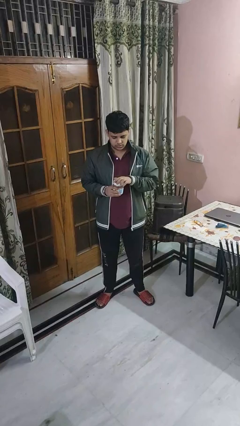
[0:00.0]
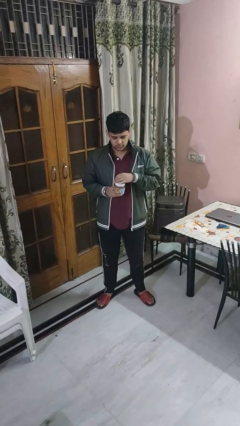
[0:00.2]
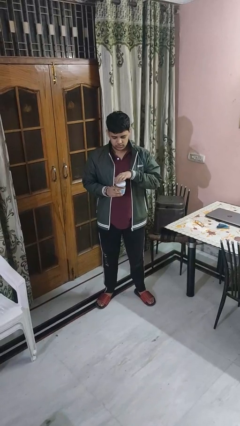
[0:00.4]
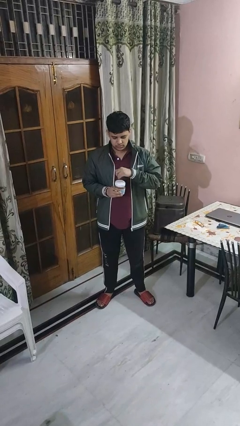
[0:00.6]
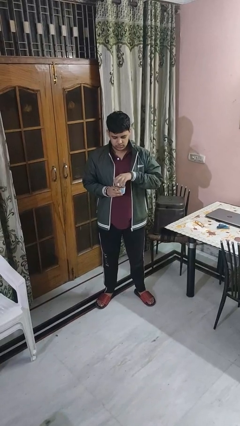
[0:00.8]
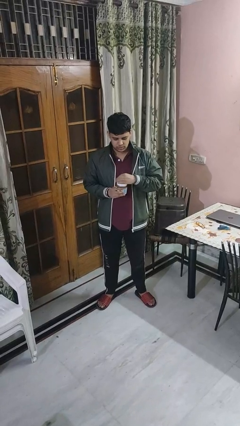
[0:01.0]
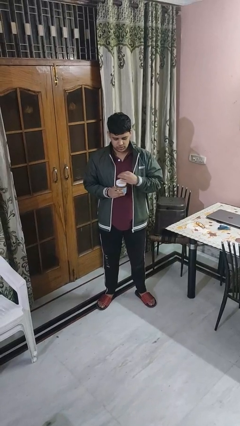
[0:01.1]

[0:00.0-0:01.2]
person closes jar

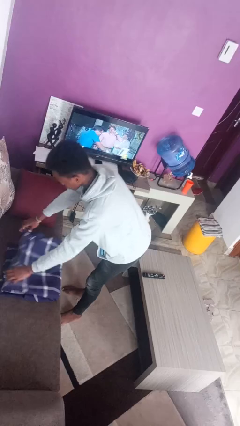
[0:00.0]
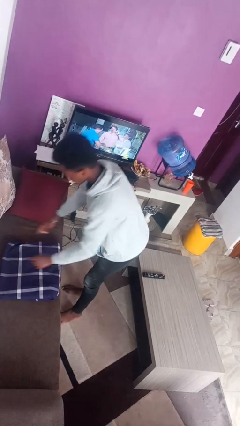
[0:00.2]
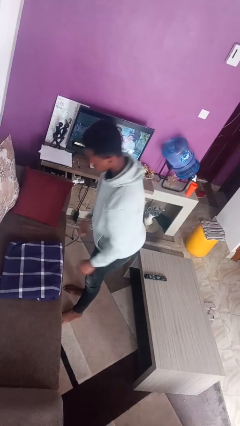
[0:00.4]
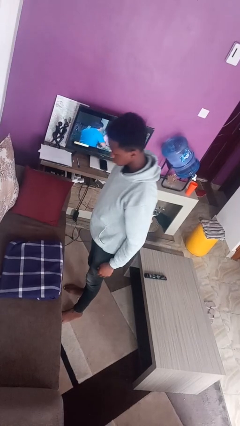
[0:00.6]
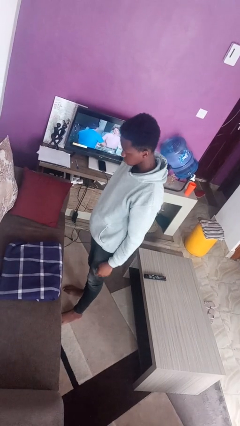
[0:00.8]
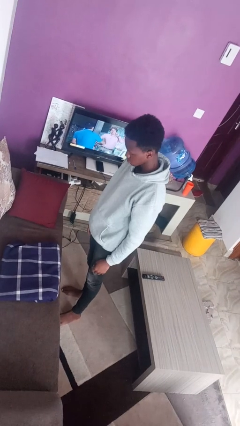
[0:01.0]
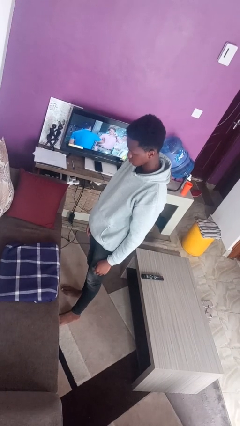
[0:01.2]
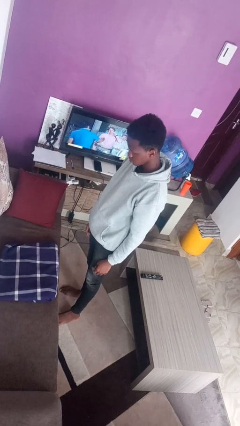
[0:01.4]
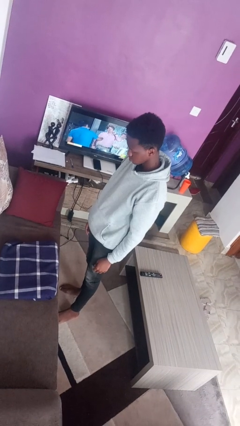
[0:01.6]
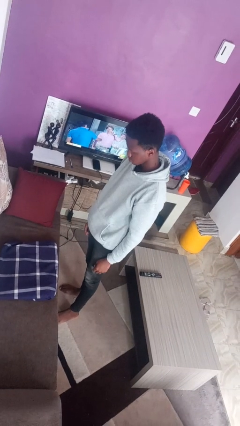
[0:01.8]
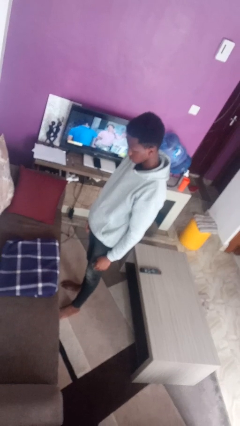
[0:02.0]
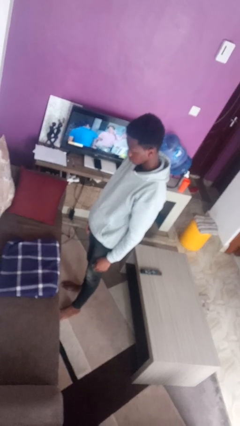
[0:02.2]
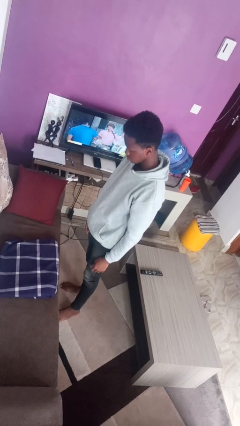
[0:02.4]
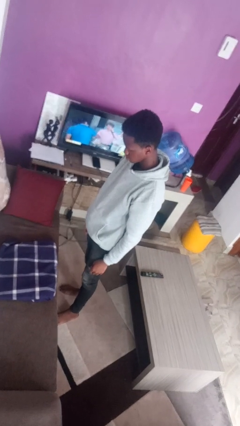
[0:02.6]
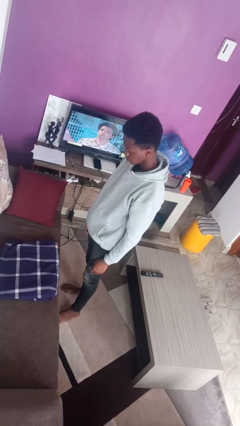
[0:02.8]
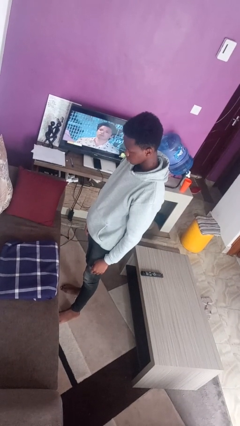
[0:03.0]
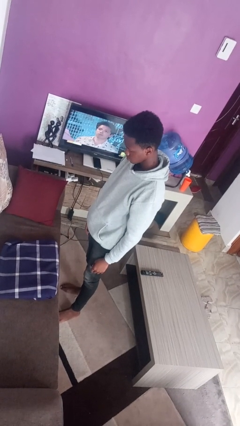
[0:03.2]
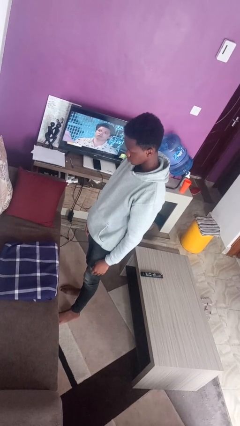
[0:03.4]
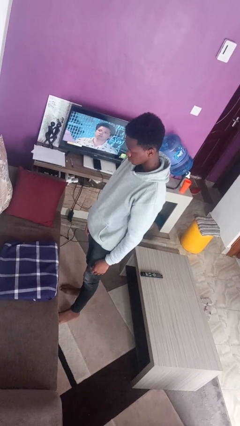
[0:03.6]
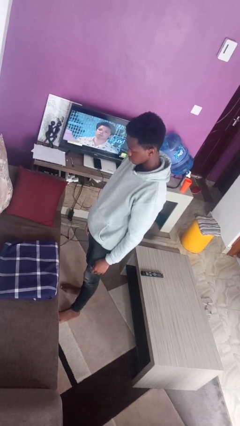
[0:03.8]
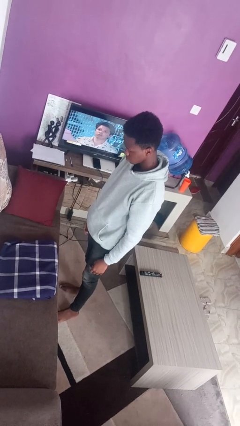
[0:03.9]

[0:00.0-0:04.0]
person folds blanket

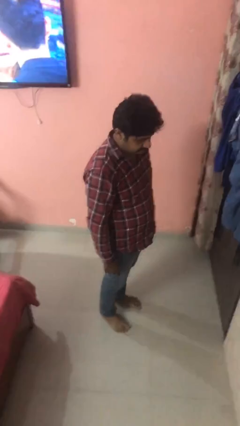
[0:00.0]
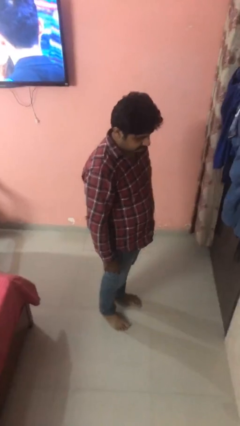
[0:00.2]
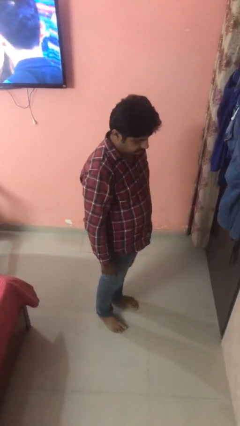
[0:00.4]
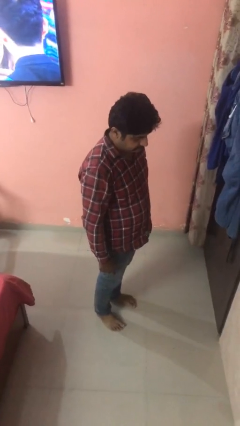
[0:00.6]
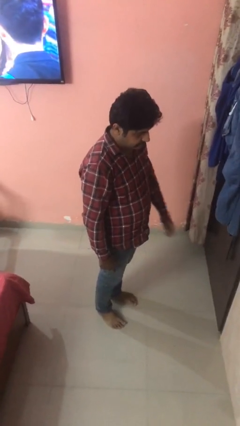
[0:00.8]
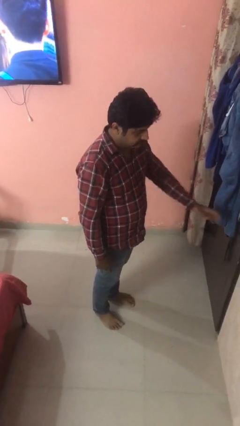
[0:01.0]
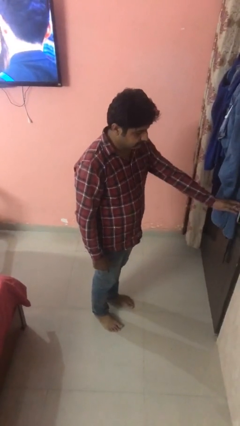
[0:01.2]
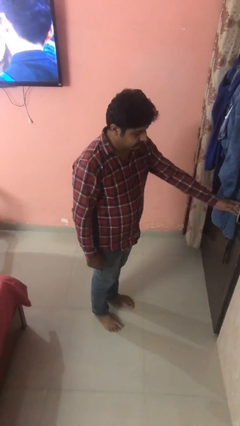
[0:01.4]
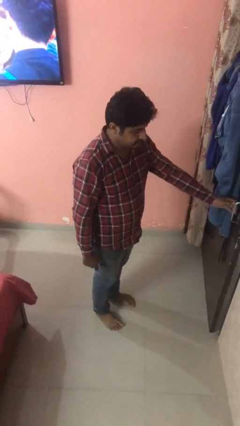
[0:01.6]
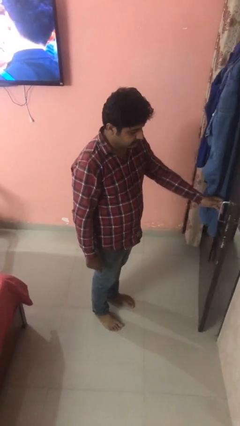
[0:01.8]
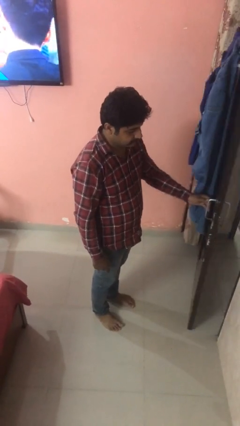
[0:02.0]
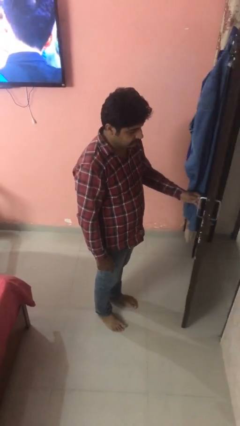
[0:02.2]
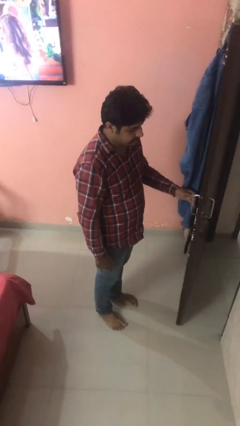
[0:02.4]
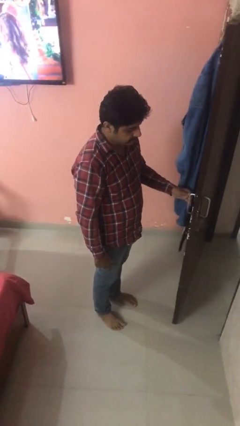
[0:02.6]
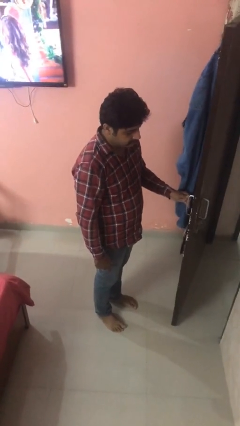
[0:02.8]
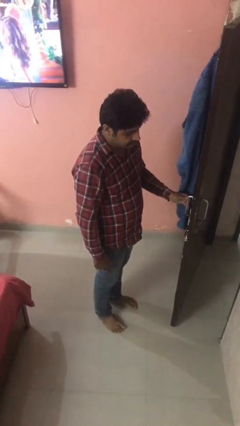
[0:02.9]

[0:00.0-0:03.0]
person opens facility door

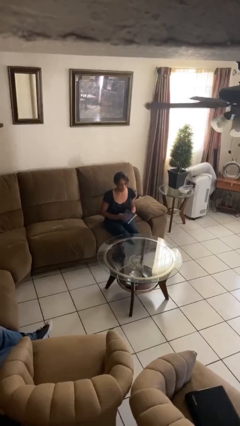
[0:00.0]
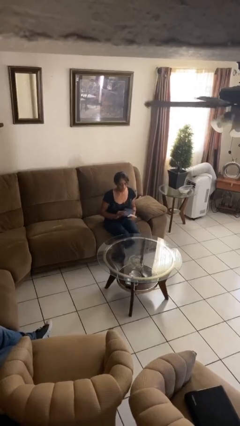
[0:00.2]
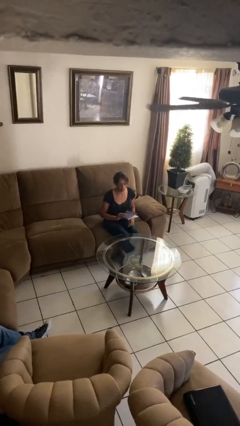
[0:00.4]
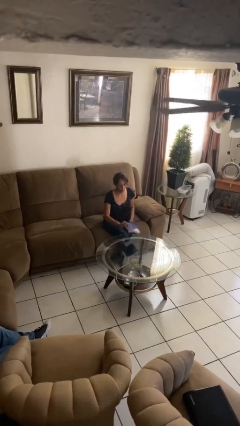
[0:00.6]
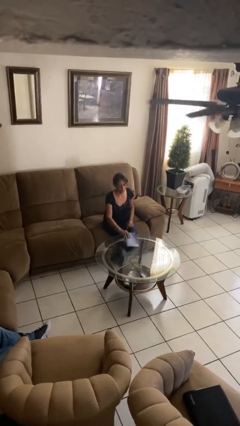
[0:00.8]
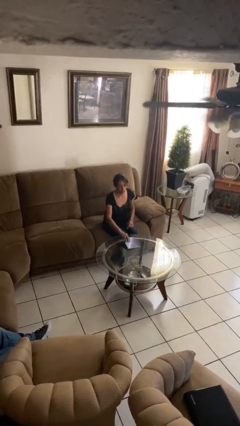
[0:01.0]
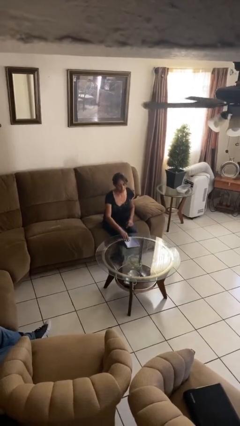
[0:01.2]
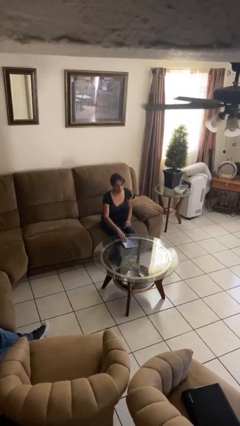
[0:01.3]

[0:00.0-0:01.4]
person puts down object on table

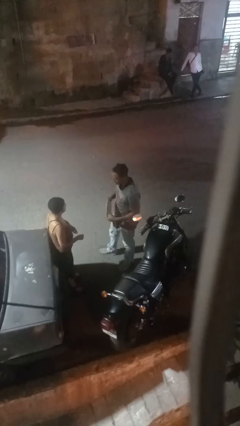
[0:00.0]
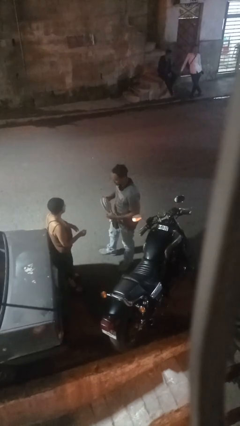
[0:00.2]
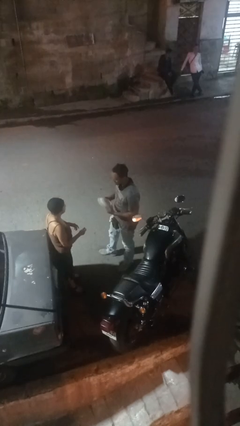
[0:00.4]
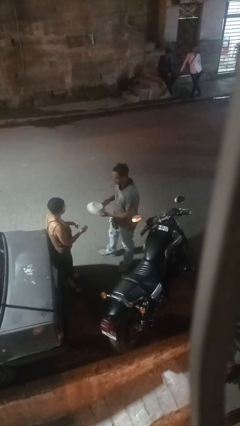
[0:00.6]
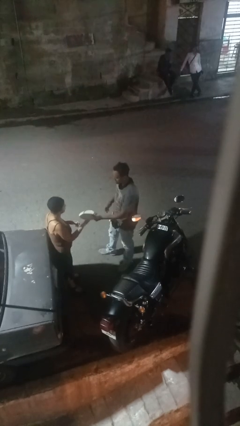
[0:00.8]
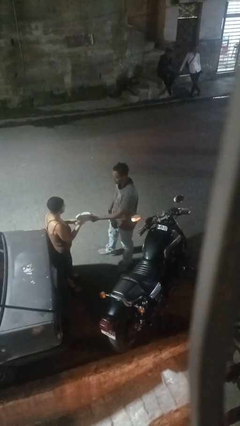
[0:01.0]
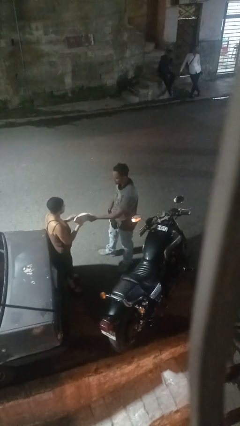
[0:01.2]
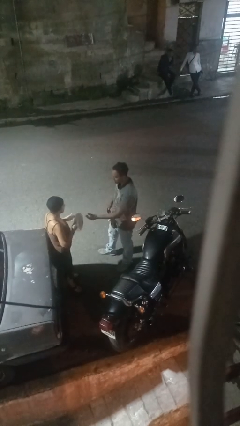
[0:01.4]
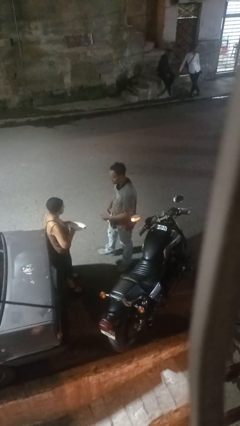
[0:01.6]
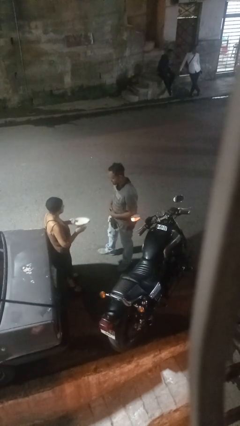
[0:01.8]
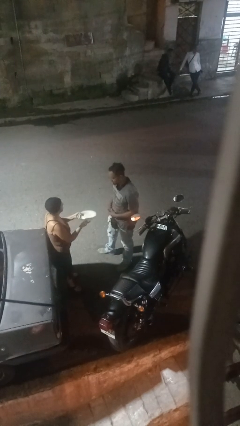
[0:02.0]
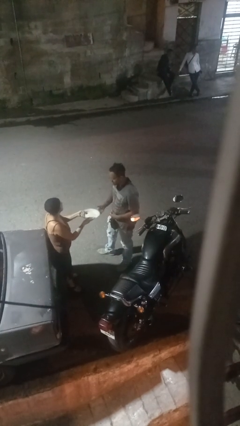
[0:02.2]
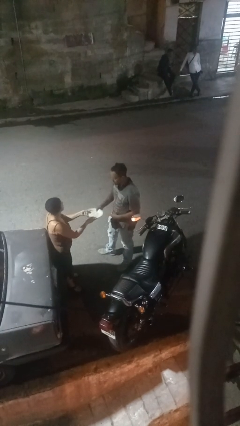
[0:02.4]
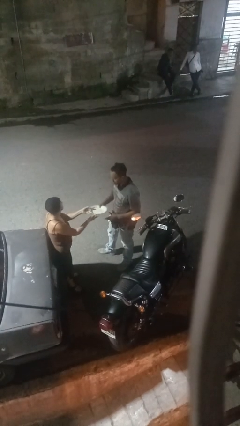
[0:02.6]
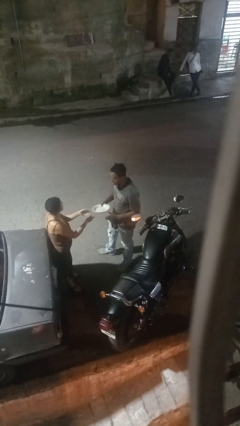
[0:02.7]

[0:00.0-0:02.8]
person transfers object to person

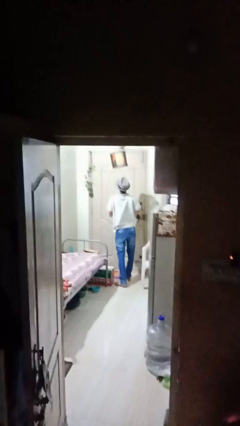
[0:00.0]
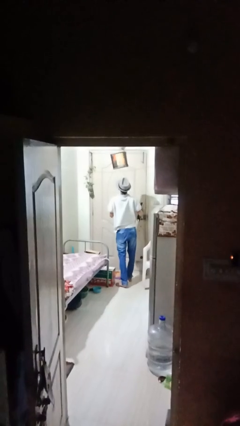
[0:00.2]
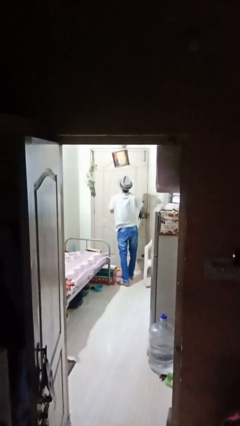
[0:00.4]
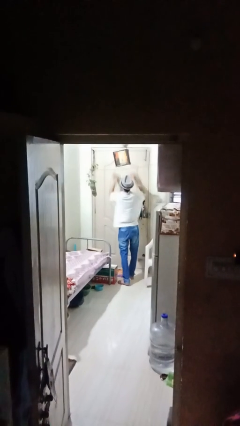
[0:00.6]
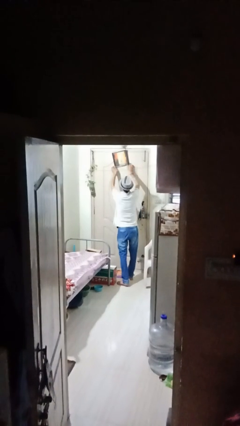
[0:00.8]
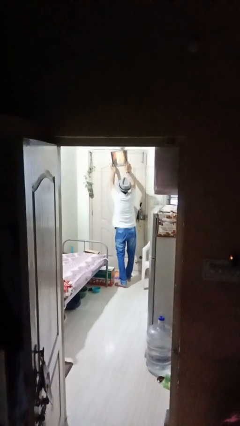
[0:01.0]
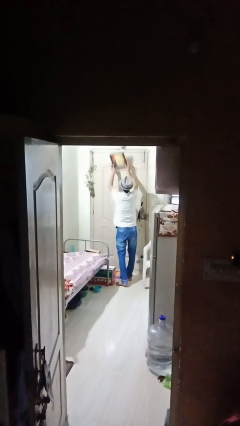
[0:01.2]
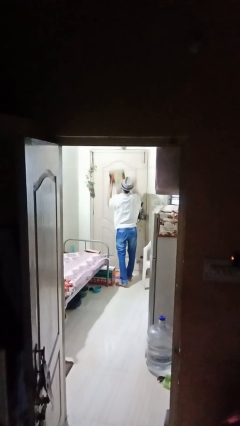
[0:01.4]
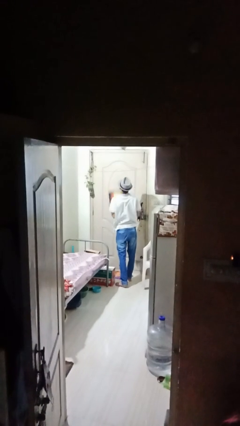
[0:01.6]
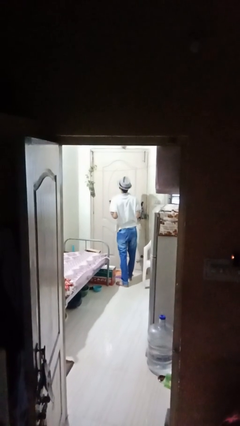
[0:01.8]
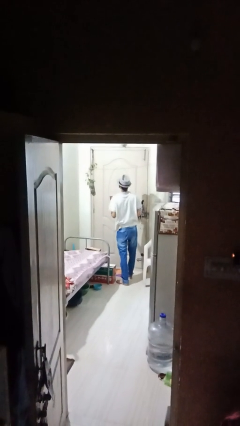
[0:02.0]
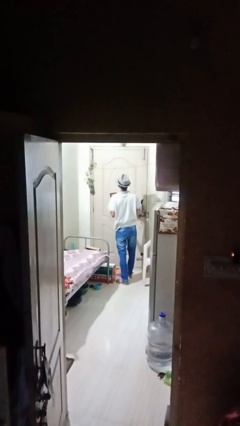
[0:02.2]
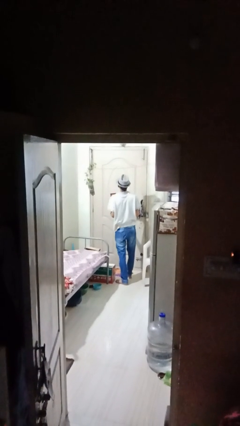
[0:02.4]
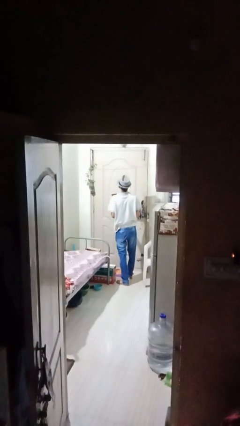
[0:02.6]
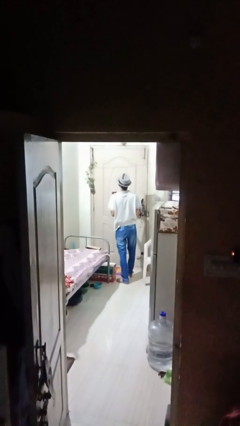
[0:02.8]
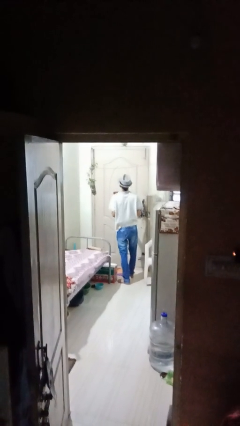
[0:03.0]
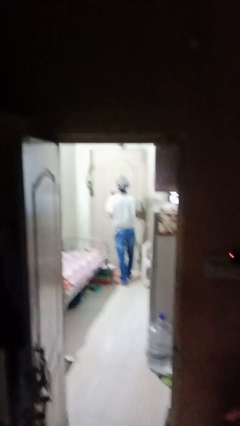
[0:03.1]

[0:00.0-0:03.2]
person takes down picture frame

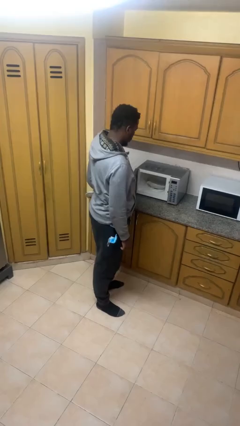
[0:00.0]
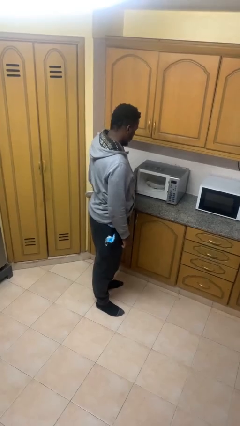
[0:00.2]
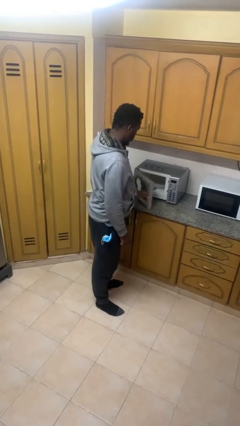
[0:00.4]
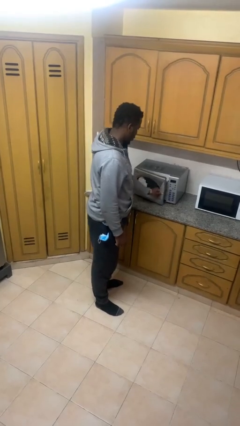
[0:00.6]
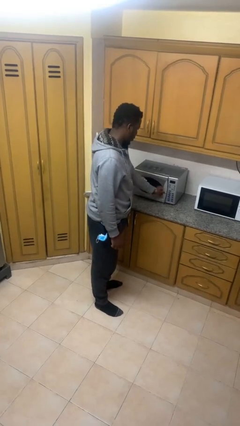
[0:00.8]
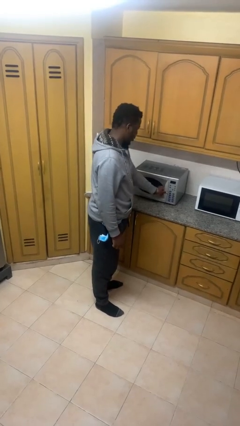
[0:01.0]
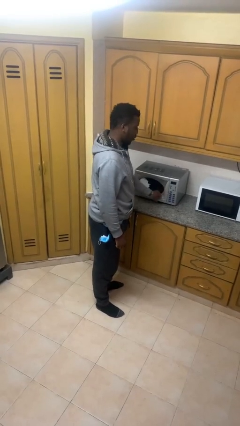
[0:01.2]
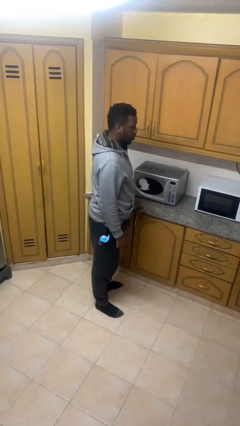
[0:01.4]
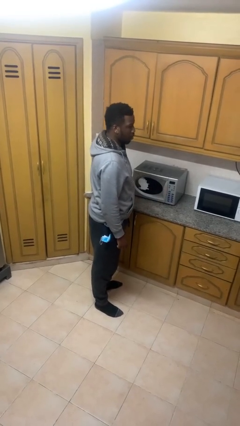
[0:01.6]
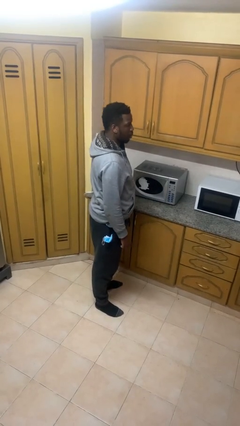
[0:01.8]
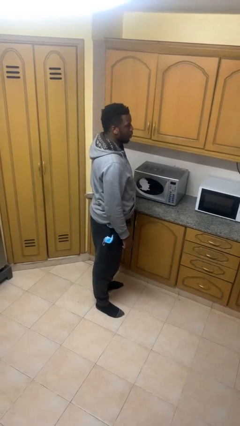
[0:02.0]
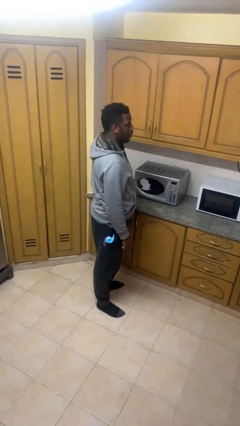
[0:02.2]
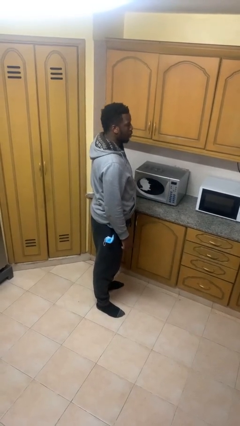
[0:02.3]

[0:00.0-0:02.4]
person closes microwave
